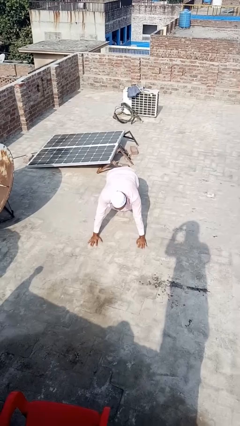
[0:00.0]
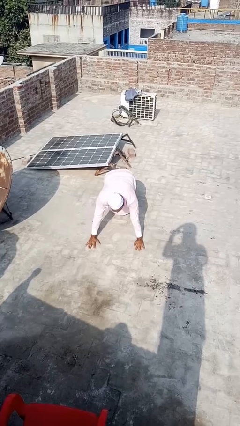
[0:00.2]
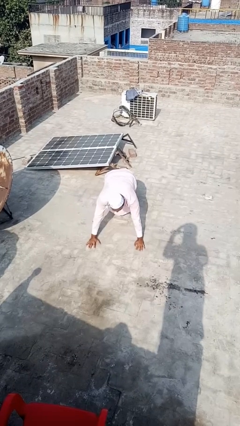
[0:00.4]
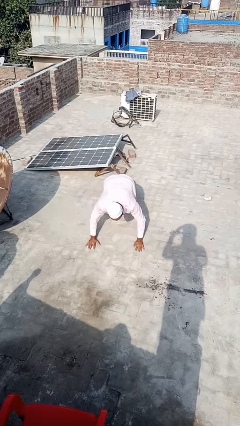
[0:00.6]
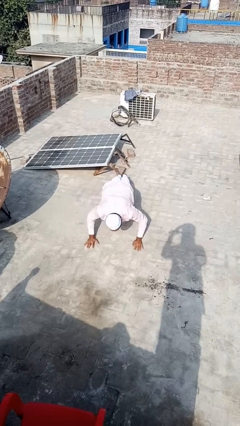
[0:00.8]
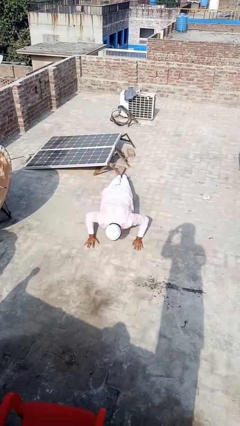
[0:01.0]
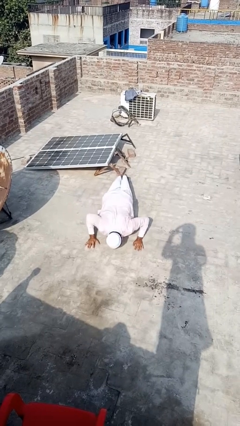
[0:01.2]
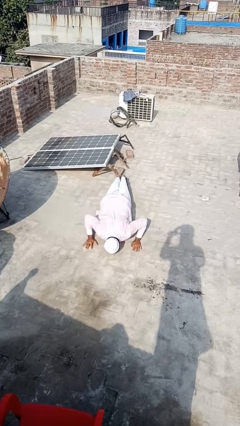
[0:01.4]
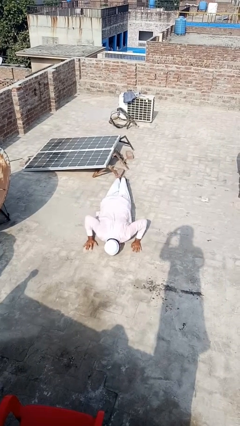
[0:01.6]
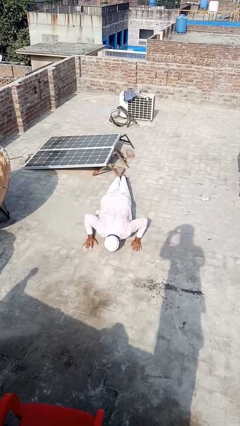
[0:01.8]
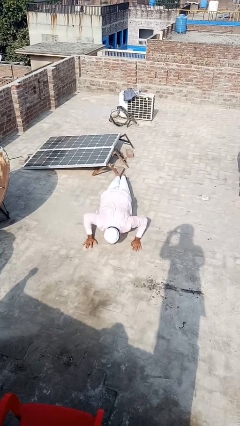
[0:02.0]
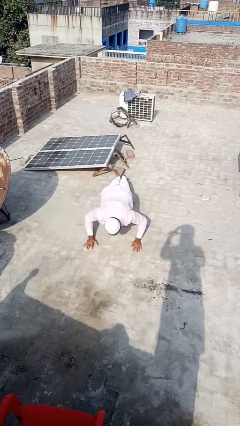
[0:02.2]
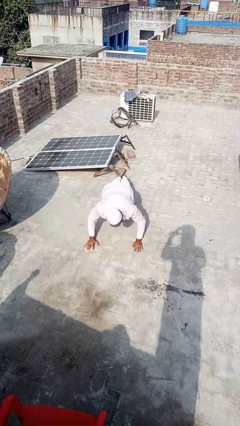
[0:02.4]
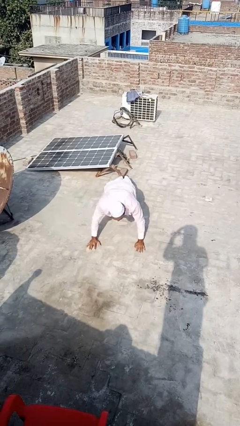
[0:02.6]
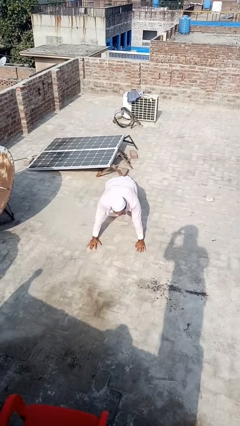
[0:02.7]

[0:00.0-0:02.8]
person exercises with pushup

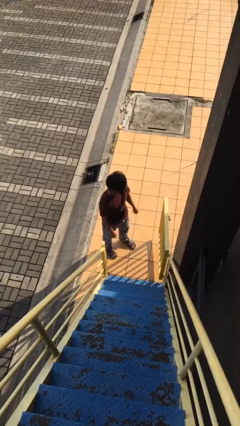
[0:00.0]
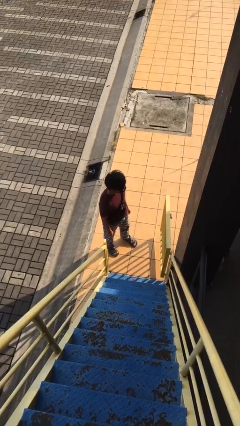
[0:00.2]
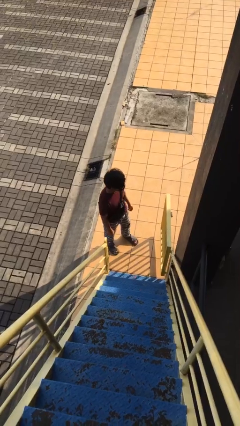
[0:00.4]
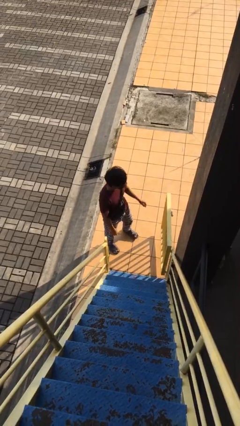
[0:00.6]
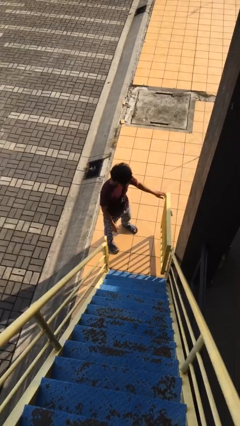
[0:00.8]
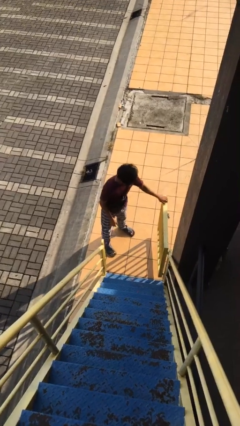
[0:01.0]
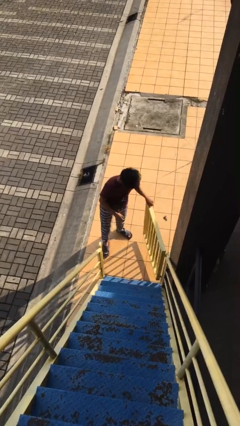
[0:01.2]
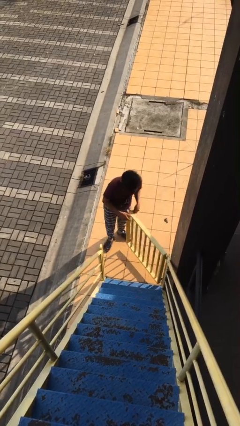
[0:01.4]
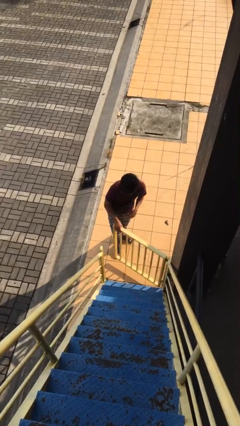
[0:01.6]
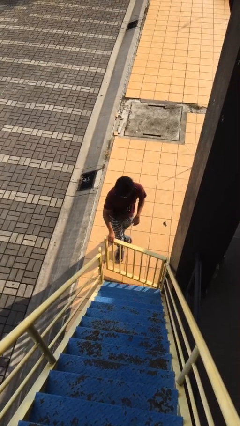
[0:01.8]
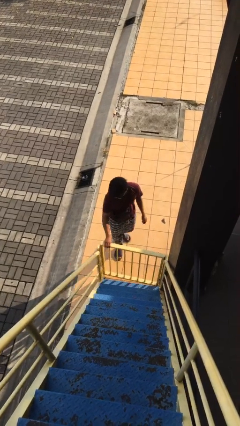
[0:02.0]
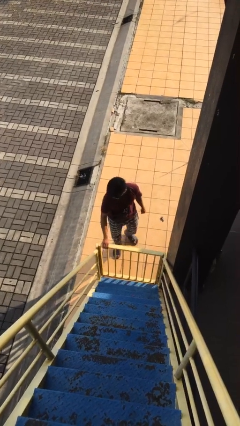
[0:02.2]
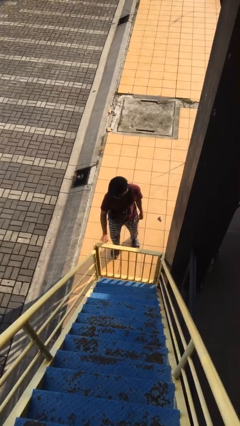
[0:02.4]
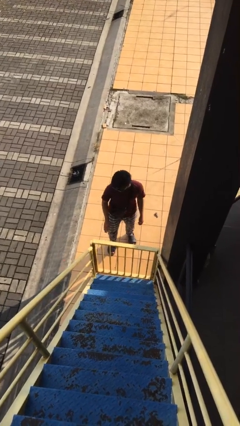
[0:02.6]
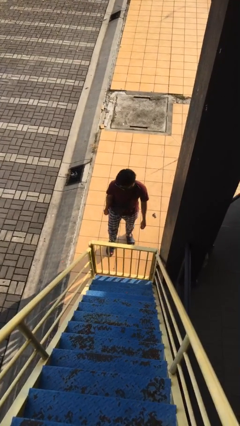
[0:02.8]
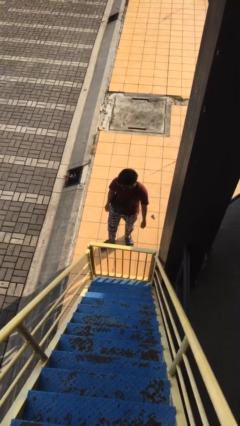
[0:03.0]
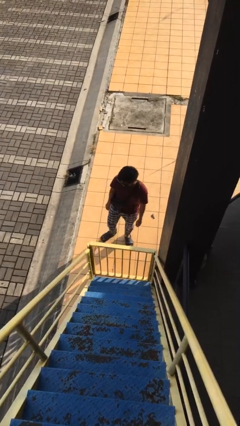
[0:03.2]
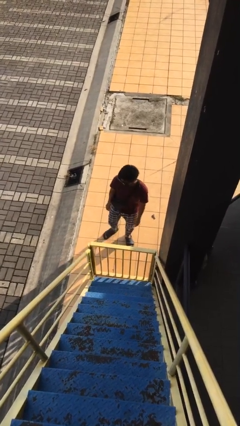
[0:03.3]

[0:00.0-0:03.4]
person closes facility door

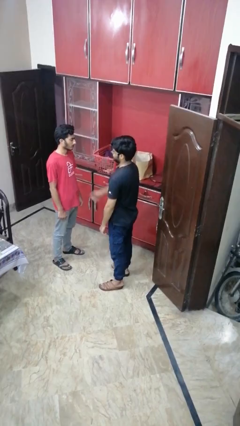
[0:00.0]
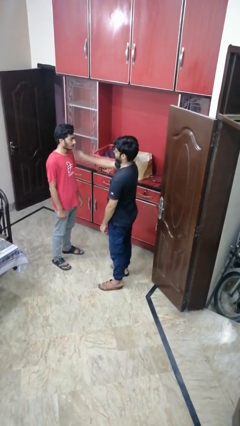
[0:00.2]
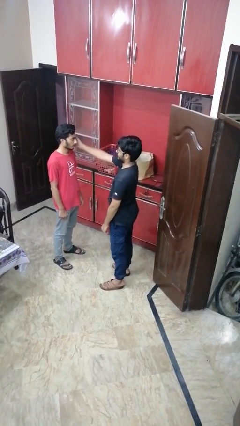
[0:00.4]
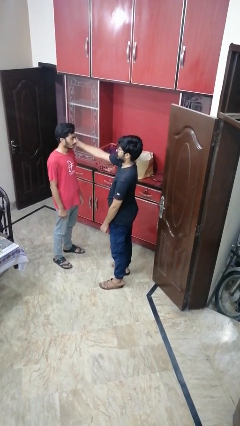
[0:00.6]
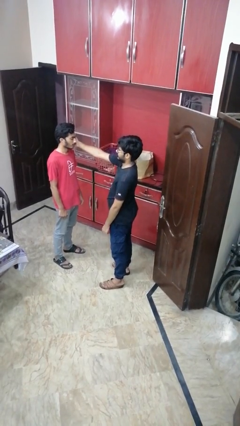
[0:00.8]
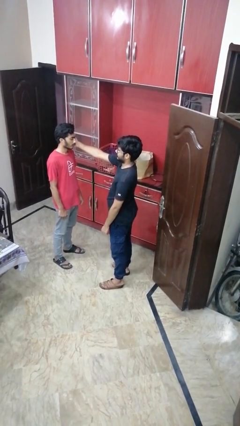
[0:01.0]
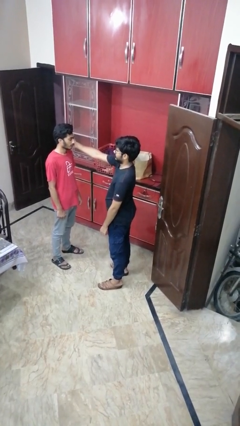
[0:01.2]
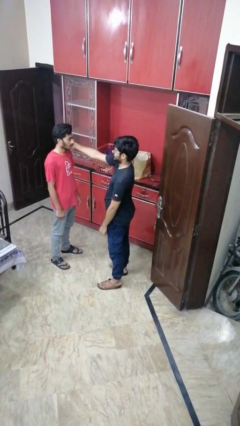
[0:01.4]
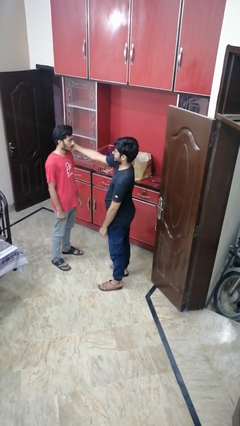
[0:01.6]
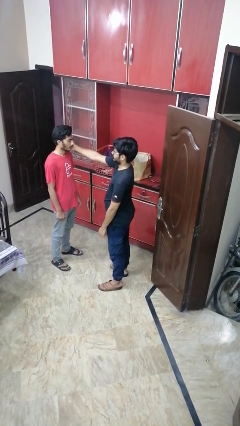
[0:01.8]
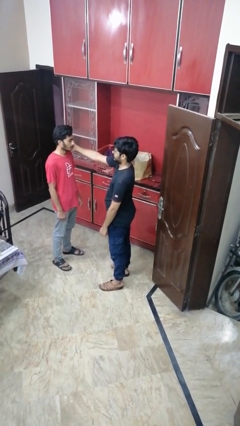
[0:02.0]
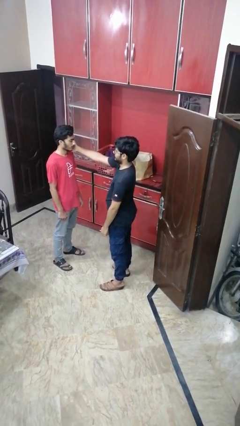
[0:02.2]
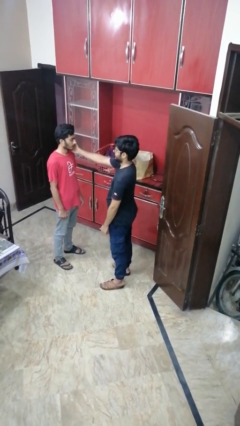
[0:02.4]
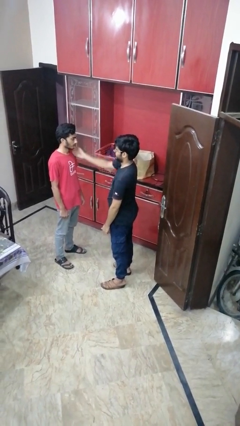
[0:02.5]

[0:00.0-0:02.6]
person touches face of person

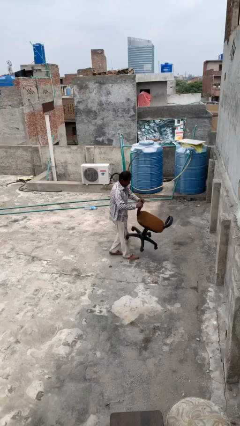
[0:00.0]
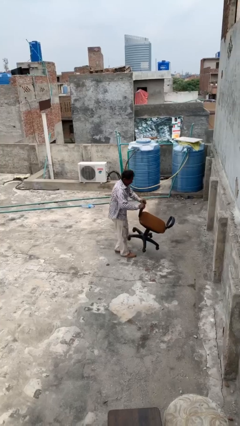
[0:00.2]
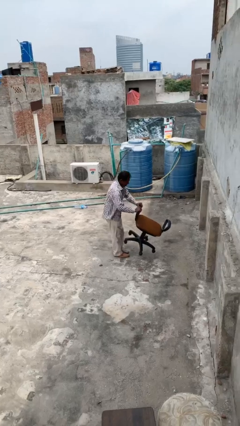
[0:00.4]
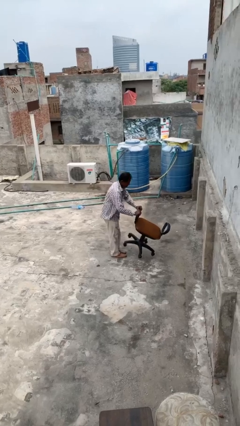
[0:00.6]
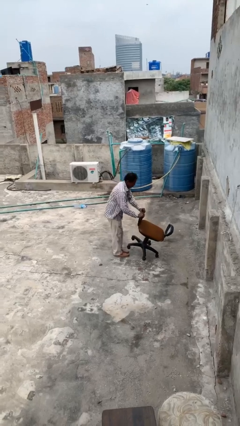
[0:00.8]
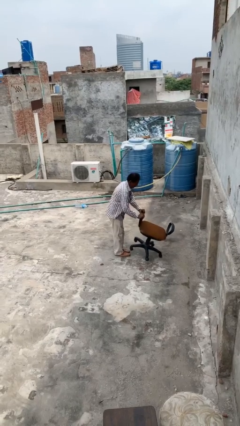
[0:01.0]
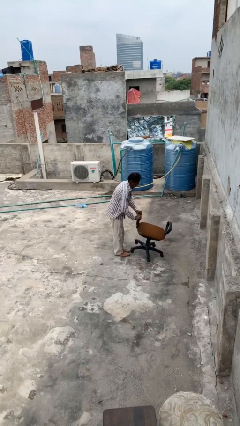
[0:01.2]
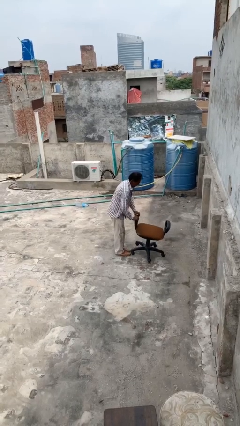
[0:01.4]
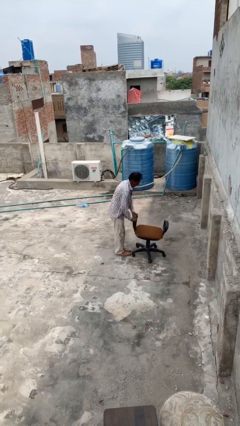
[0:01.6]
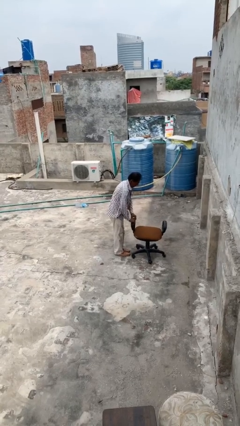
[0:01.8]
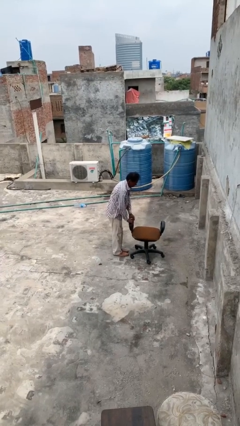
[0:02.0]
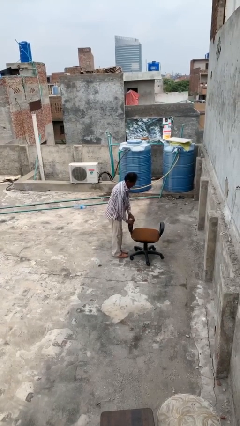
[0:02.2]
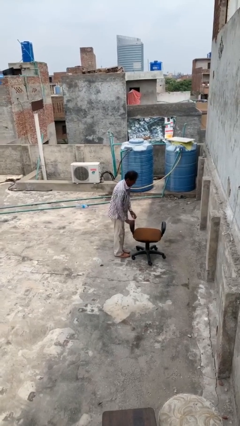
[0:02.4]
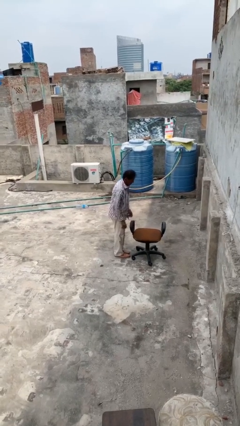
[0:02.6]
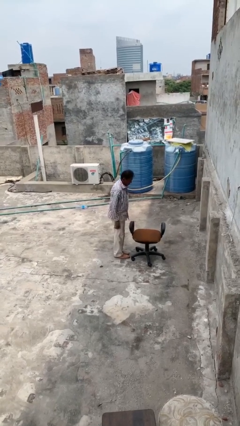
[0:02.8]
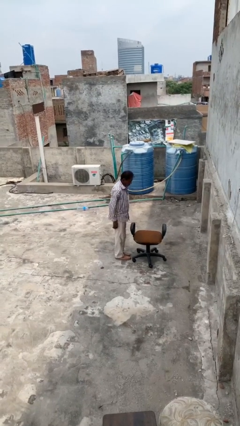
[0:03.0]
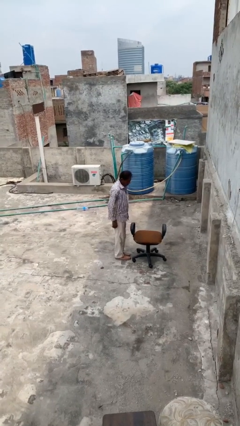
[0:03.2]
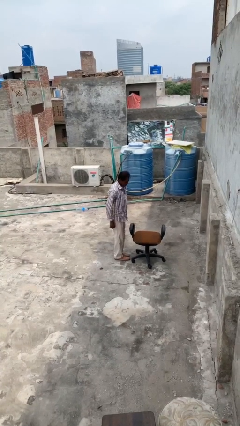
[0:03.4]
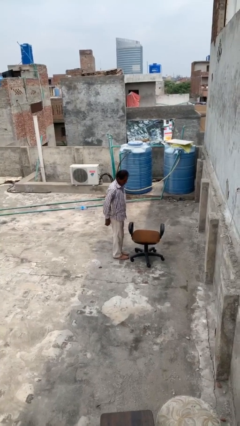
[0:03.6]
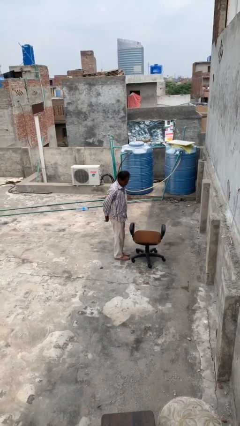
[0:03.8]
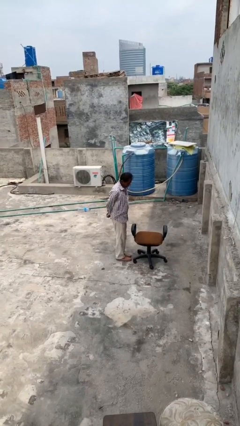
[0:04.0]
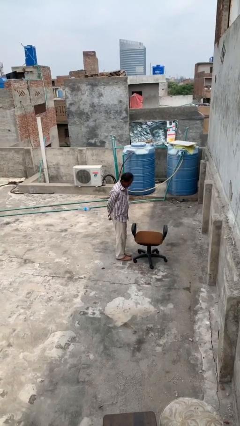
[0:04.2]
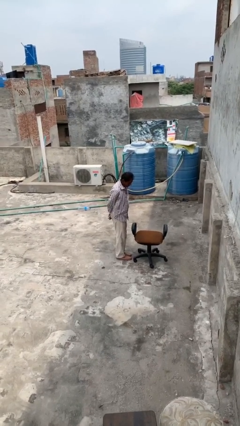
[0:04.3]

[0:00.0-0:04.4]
person puts down object on floor

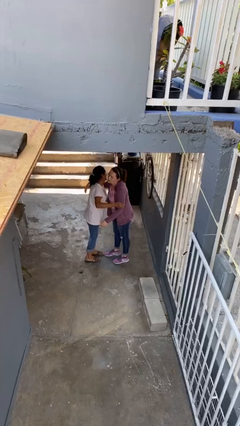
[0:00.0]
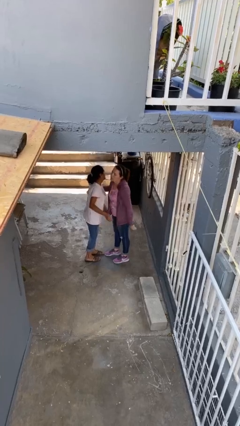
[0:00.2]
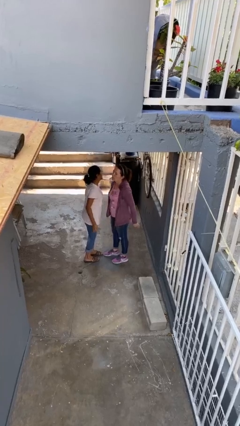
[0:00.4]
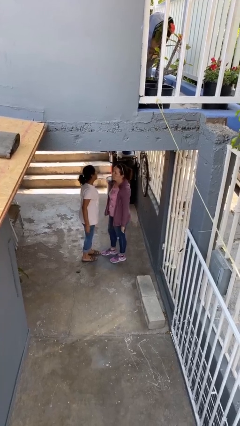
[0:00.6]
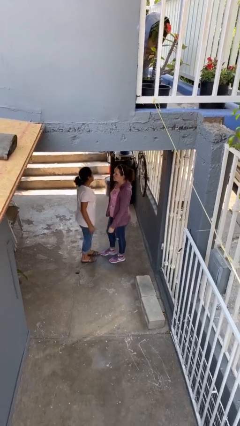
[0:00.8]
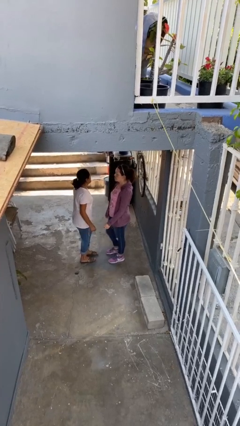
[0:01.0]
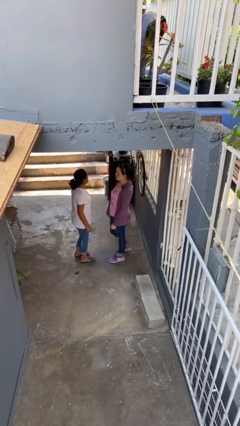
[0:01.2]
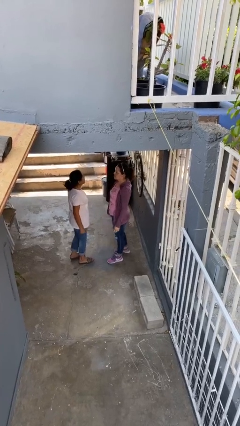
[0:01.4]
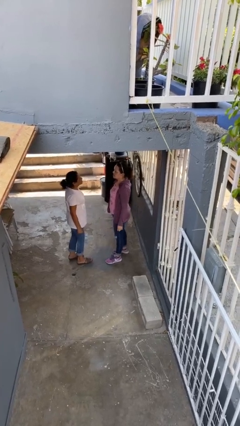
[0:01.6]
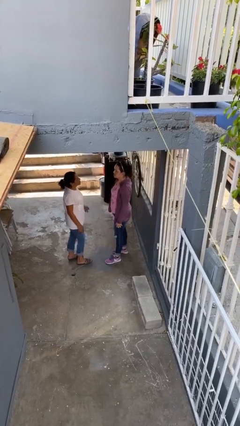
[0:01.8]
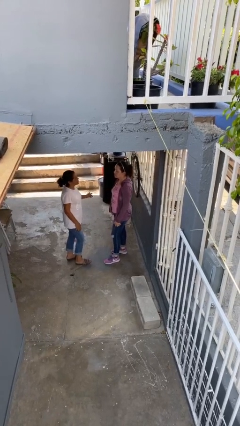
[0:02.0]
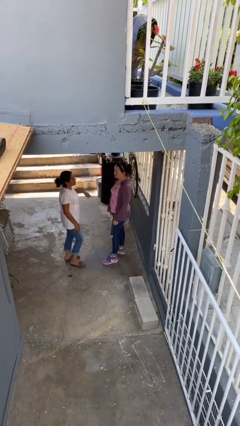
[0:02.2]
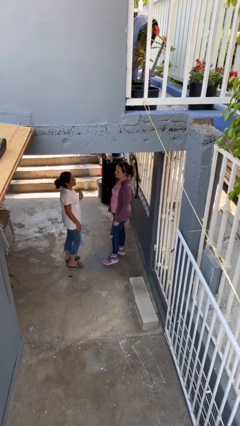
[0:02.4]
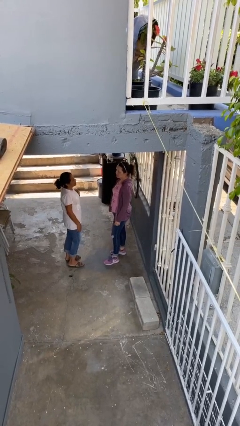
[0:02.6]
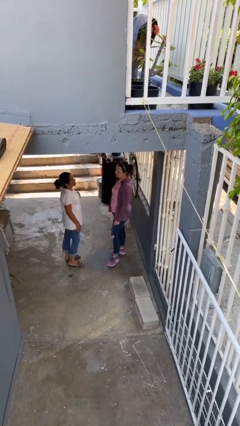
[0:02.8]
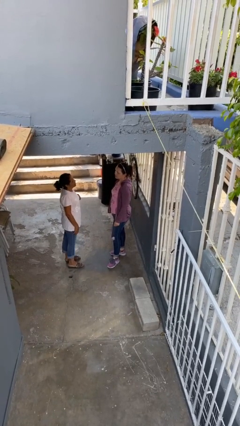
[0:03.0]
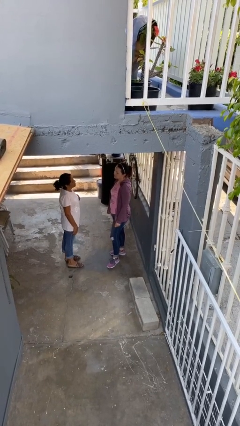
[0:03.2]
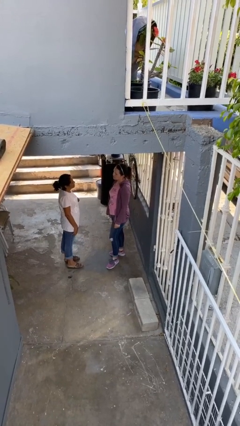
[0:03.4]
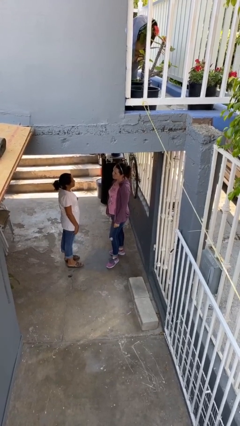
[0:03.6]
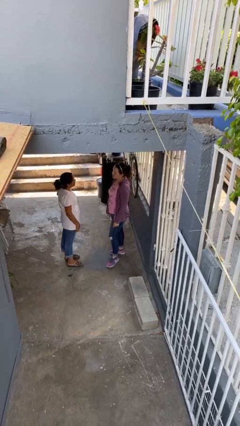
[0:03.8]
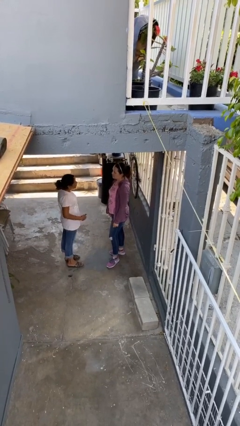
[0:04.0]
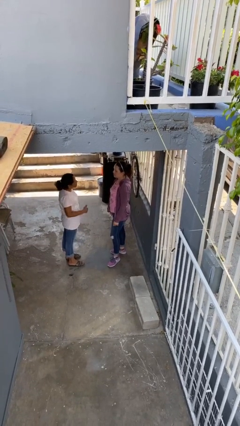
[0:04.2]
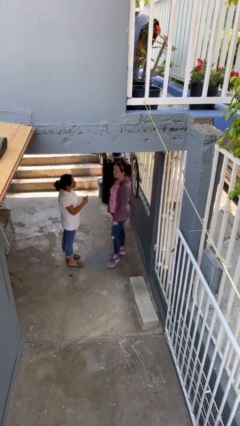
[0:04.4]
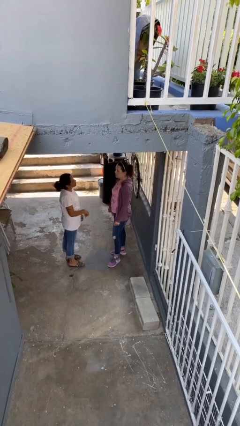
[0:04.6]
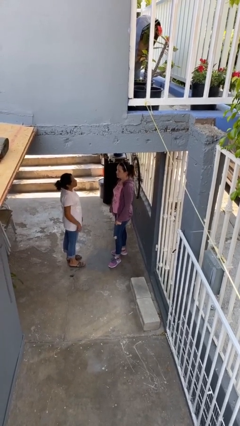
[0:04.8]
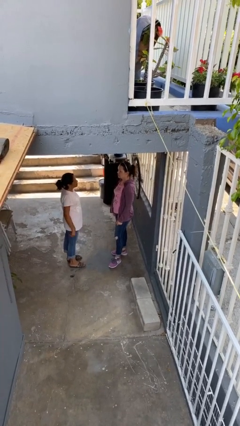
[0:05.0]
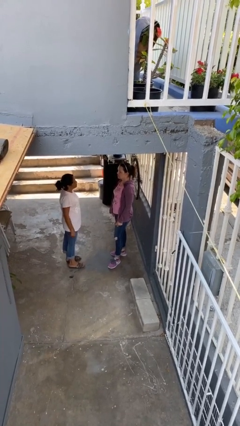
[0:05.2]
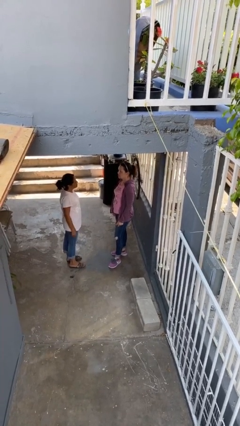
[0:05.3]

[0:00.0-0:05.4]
person talks to person
